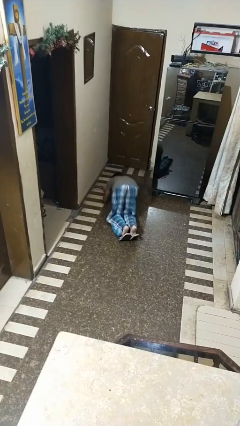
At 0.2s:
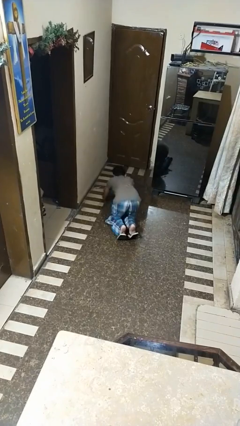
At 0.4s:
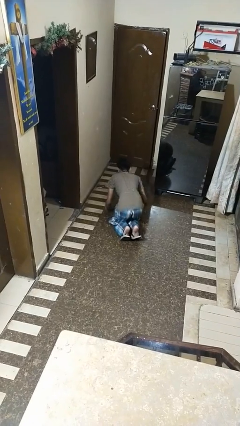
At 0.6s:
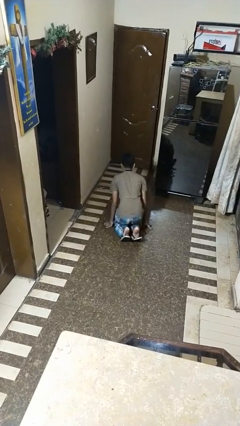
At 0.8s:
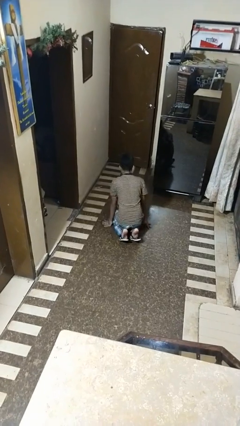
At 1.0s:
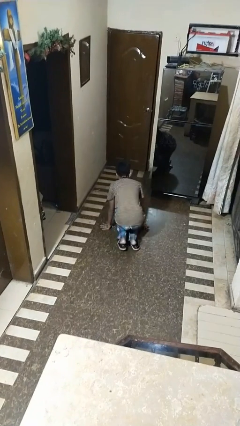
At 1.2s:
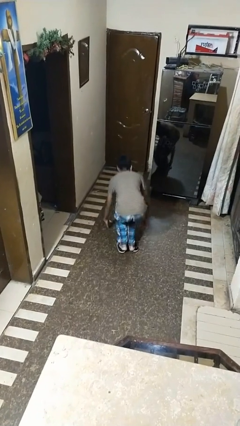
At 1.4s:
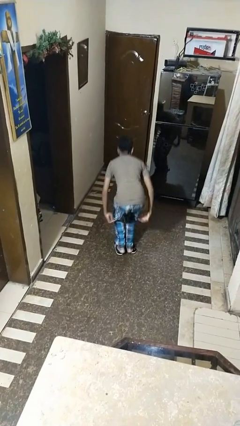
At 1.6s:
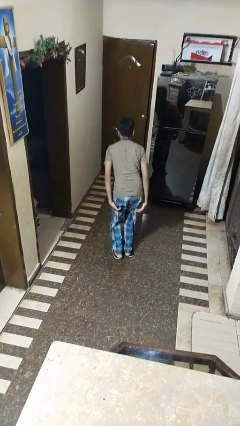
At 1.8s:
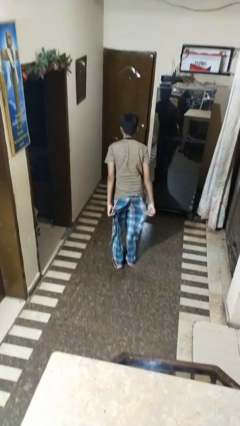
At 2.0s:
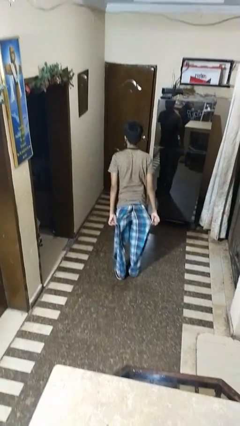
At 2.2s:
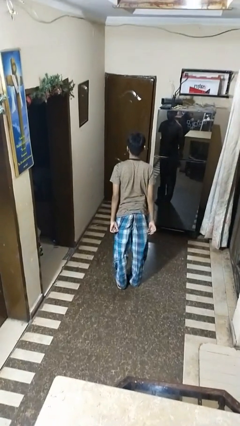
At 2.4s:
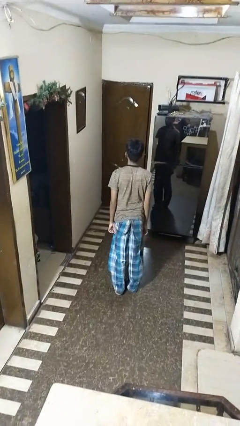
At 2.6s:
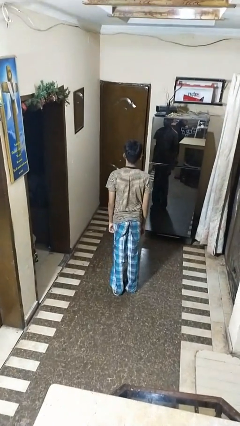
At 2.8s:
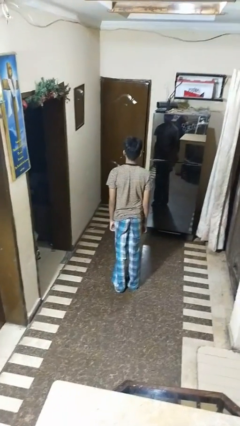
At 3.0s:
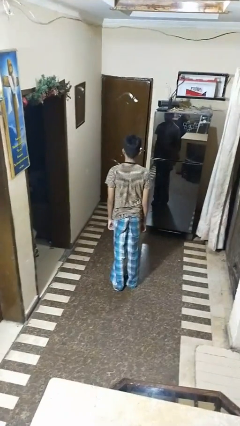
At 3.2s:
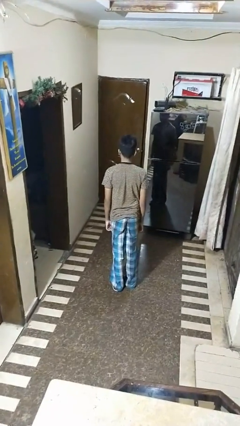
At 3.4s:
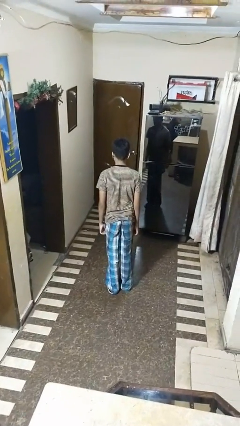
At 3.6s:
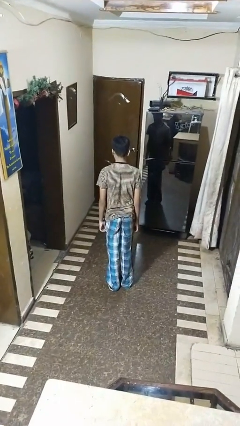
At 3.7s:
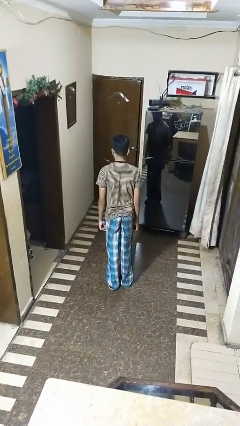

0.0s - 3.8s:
person stands up from floor

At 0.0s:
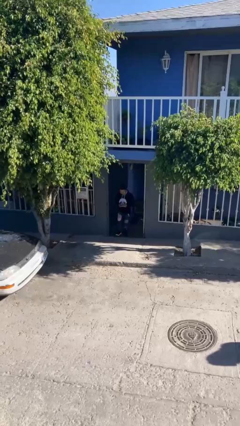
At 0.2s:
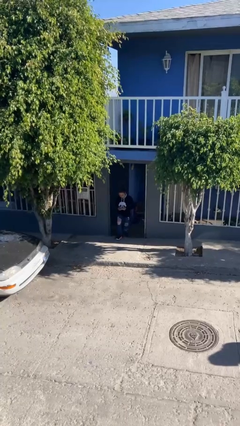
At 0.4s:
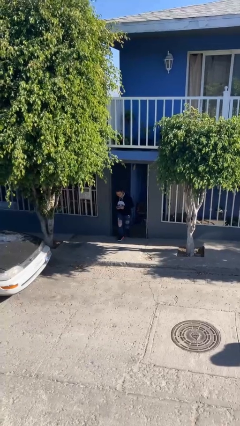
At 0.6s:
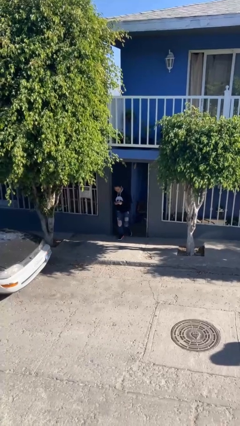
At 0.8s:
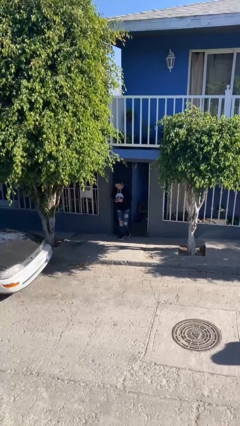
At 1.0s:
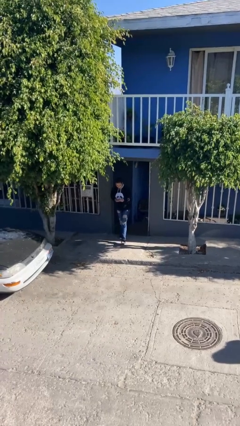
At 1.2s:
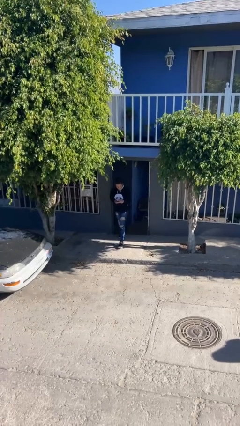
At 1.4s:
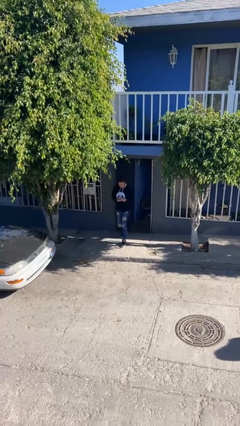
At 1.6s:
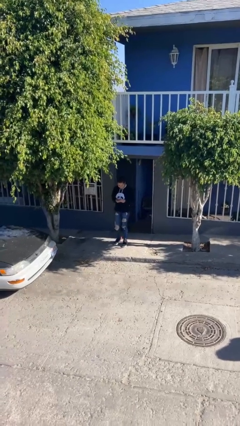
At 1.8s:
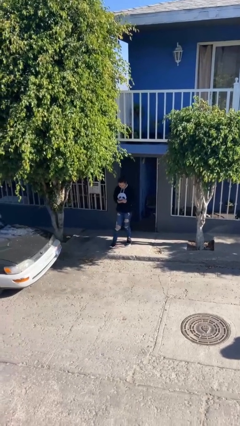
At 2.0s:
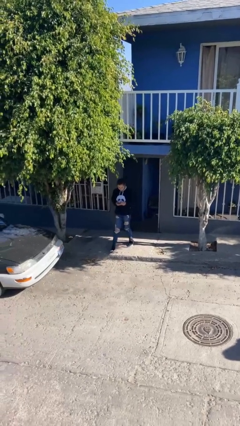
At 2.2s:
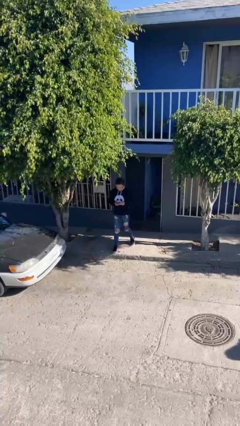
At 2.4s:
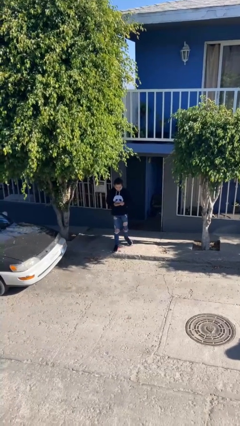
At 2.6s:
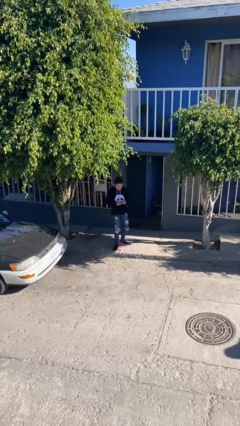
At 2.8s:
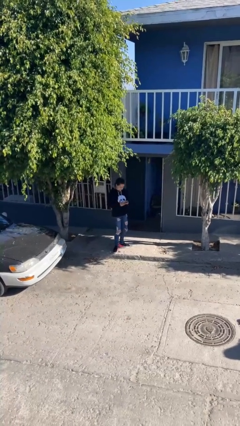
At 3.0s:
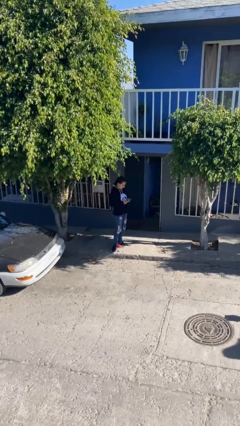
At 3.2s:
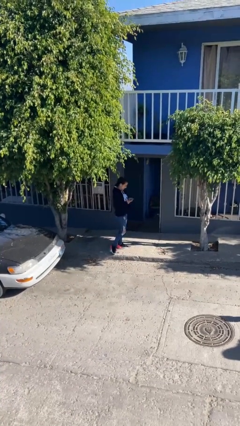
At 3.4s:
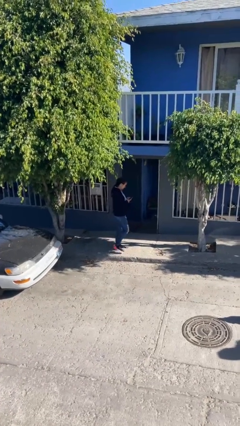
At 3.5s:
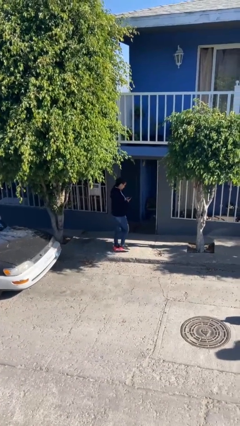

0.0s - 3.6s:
person enters scene through structure

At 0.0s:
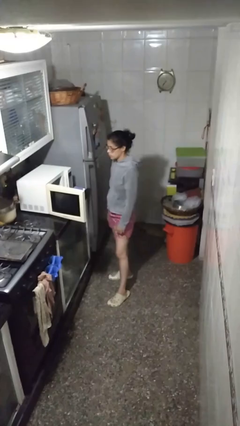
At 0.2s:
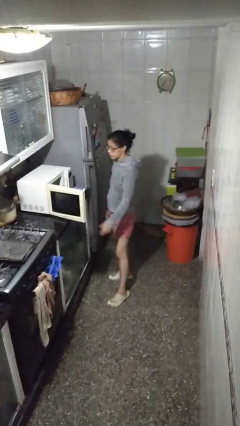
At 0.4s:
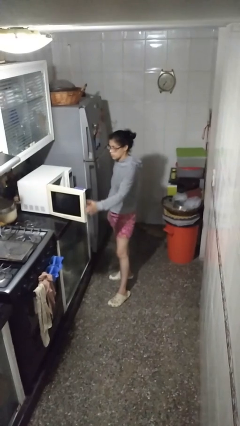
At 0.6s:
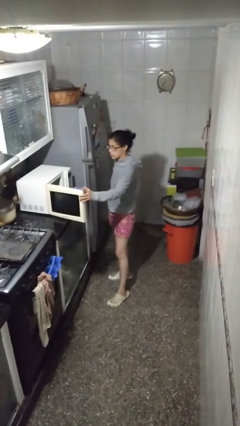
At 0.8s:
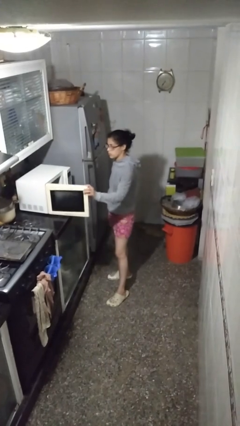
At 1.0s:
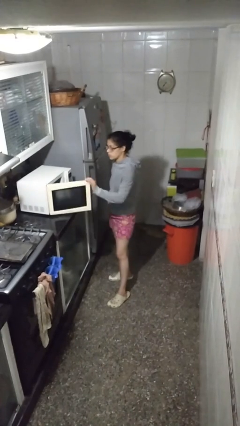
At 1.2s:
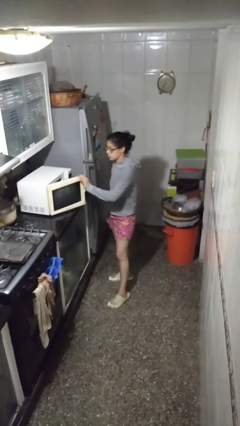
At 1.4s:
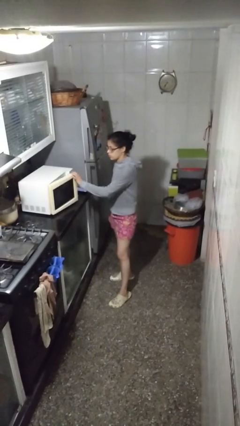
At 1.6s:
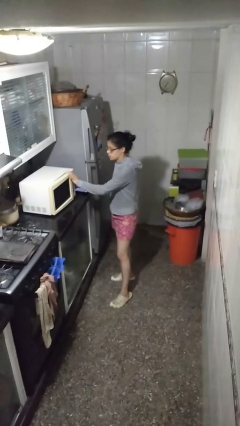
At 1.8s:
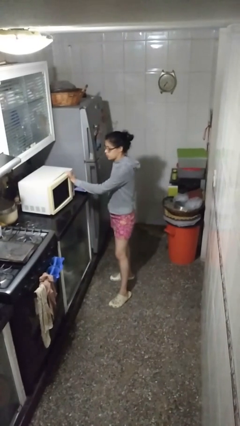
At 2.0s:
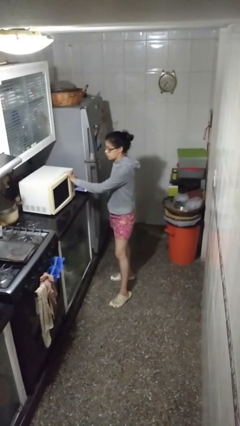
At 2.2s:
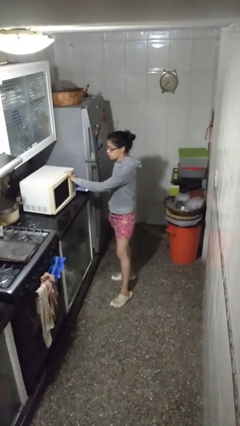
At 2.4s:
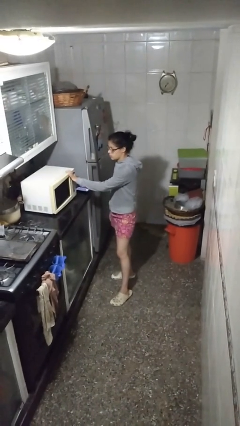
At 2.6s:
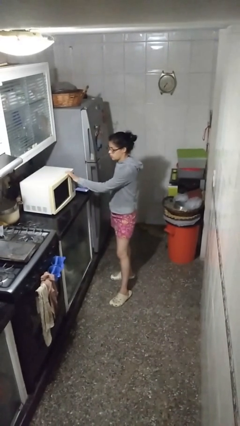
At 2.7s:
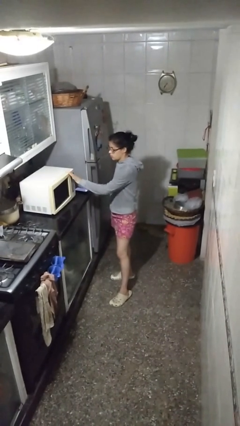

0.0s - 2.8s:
person closes microwave

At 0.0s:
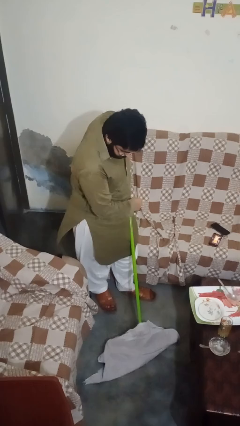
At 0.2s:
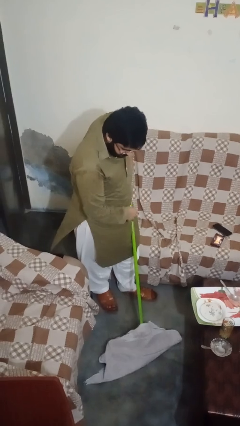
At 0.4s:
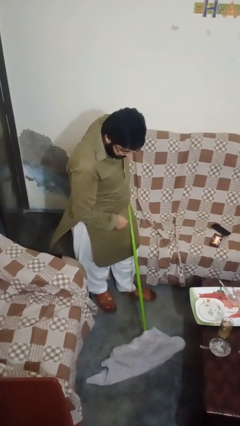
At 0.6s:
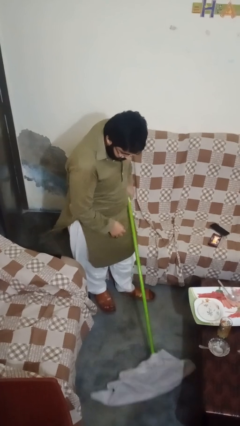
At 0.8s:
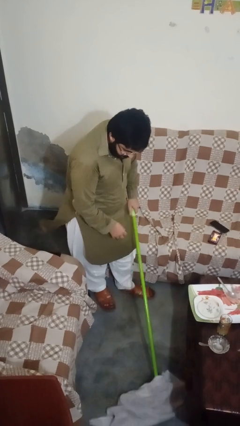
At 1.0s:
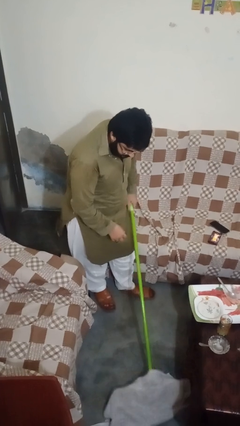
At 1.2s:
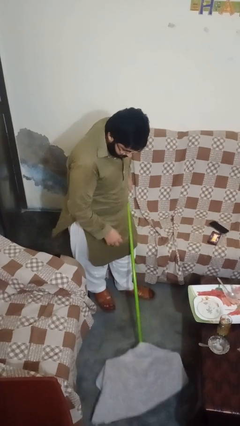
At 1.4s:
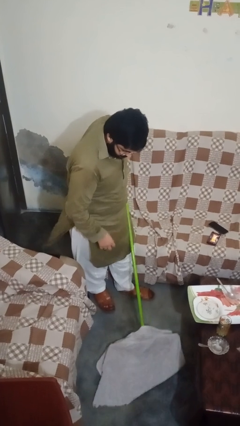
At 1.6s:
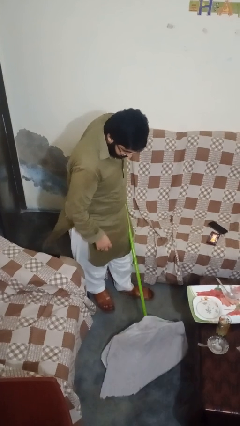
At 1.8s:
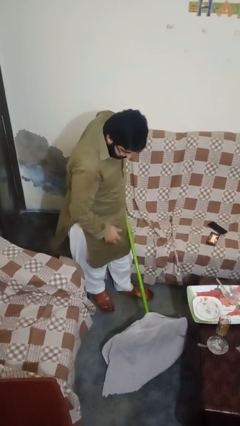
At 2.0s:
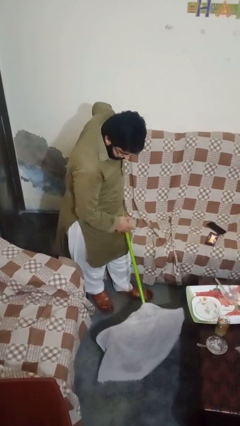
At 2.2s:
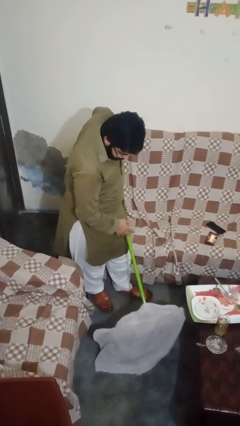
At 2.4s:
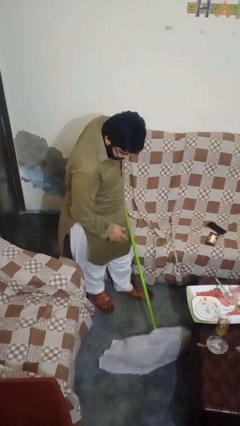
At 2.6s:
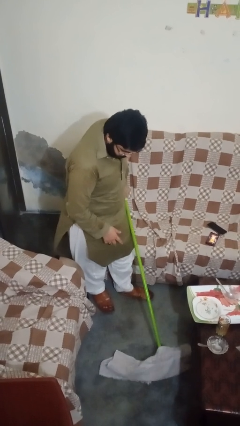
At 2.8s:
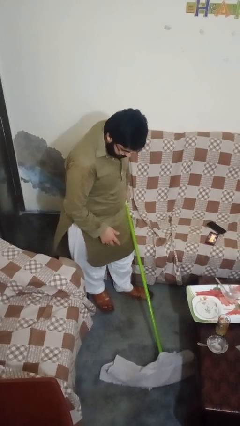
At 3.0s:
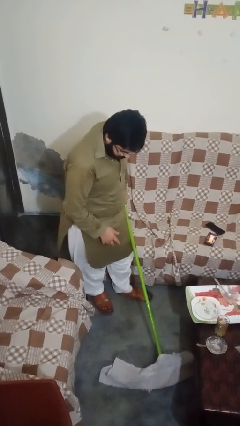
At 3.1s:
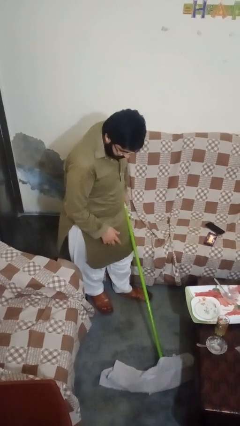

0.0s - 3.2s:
person mops

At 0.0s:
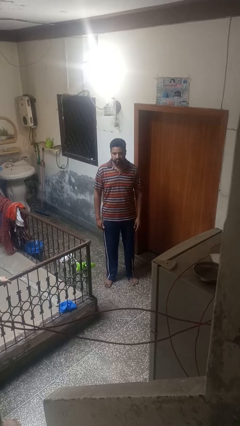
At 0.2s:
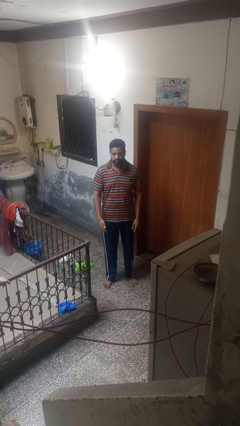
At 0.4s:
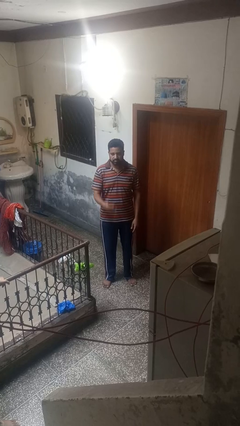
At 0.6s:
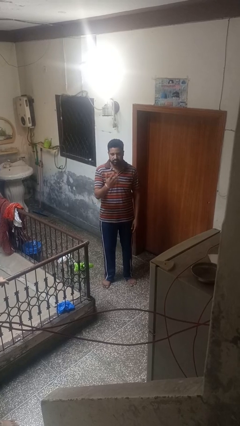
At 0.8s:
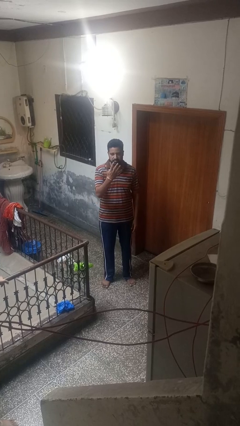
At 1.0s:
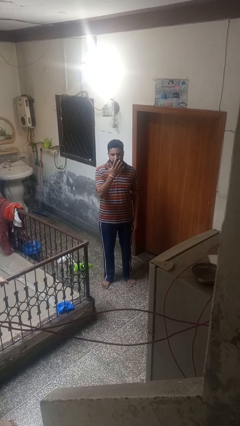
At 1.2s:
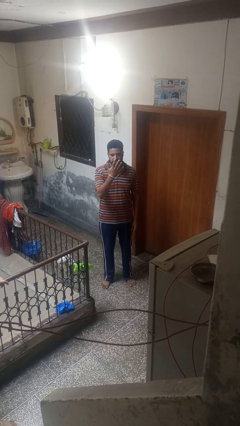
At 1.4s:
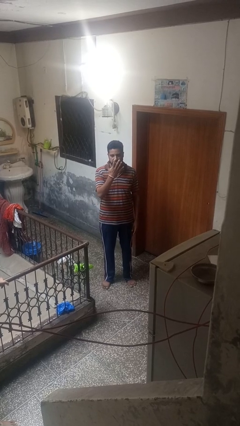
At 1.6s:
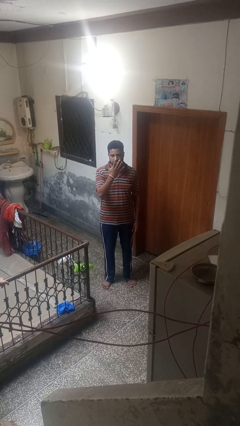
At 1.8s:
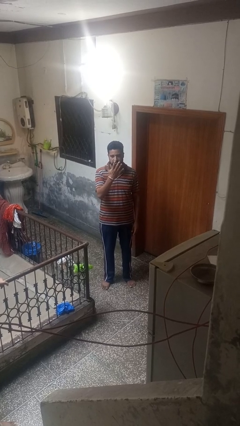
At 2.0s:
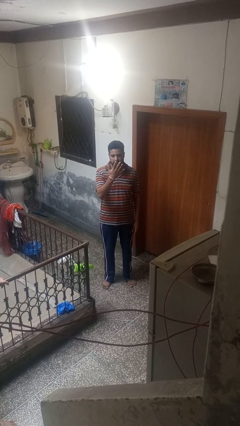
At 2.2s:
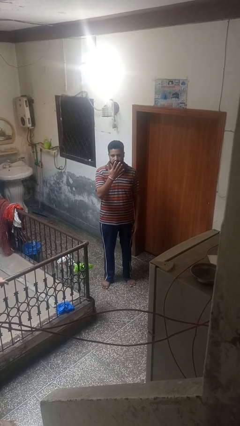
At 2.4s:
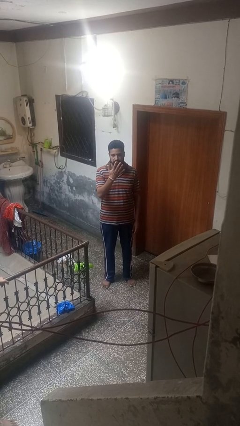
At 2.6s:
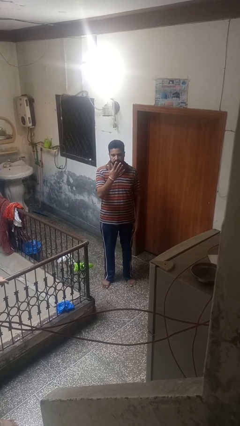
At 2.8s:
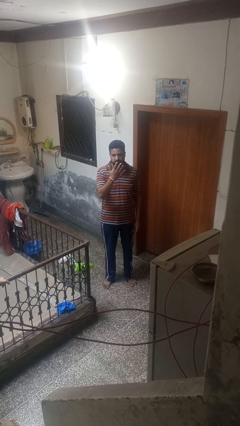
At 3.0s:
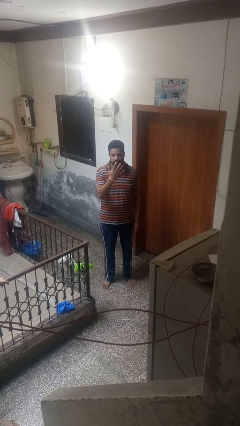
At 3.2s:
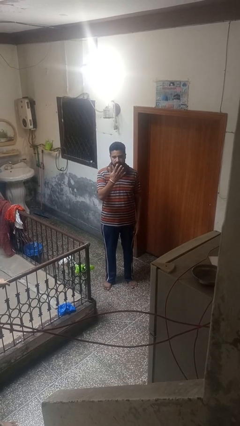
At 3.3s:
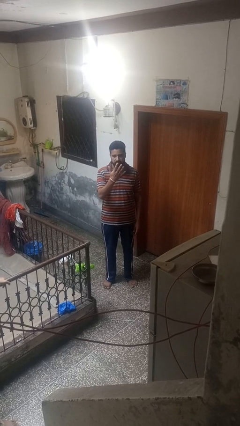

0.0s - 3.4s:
person gestures number five

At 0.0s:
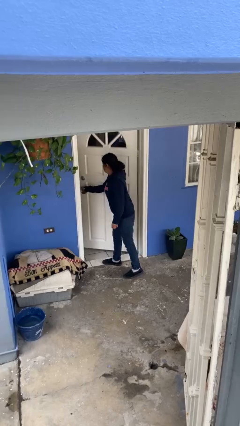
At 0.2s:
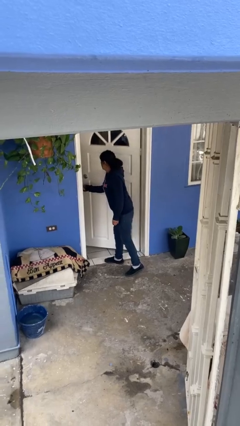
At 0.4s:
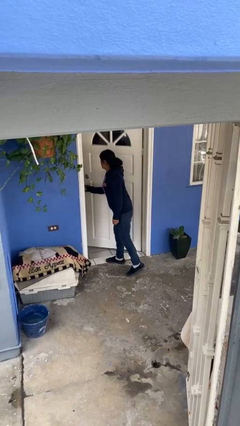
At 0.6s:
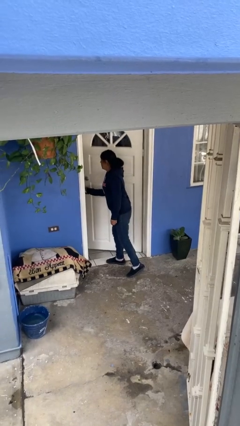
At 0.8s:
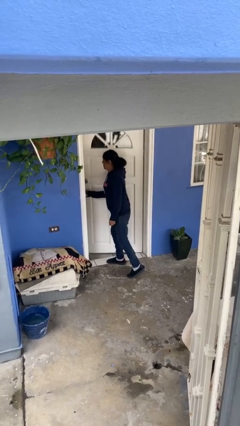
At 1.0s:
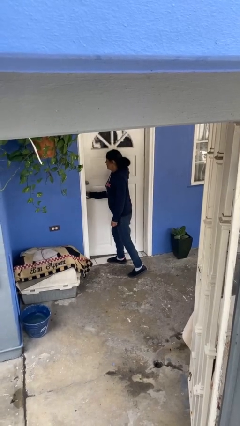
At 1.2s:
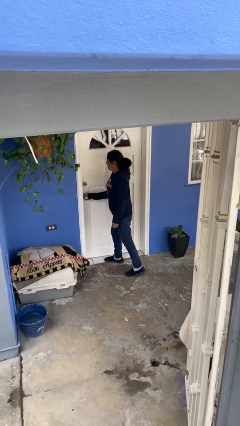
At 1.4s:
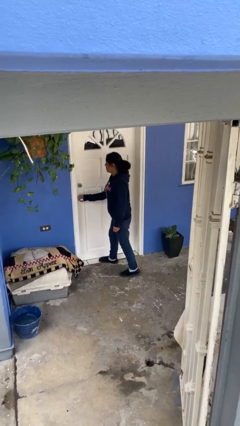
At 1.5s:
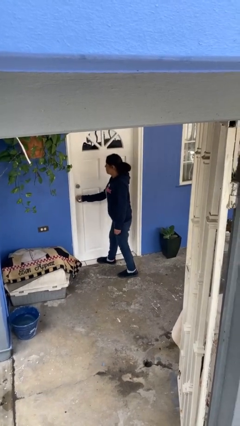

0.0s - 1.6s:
person closes facility door
